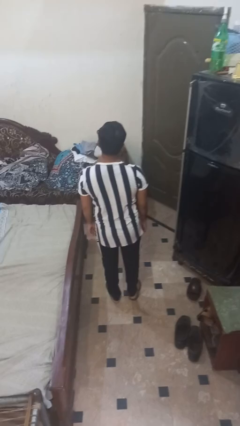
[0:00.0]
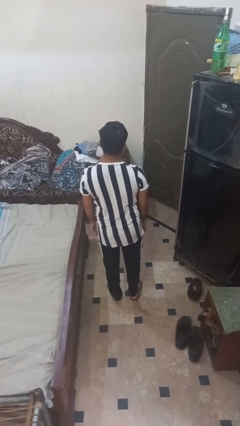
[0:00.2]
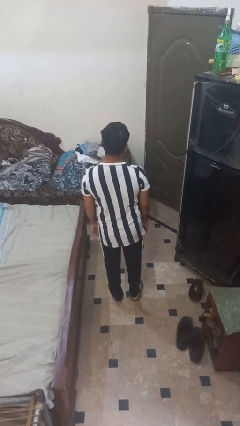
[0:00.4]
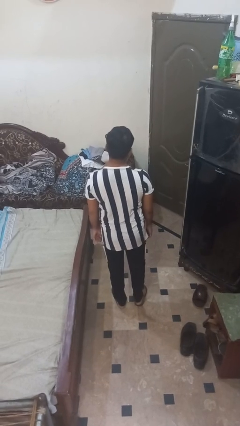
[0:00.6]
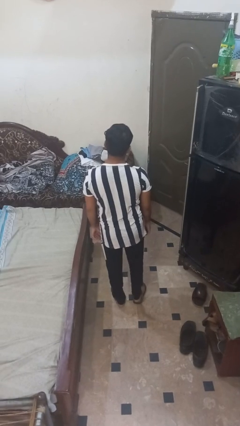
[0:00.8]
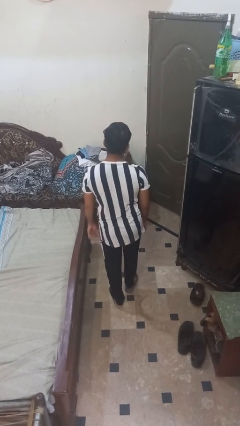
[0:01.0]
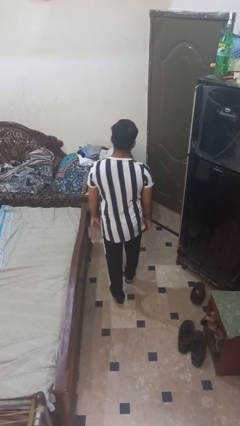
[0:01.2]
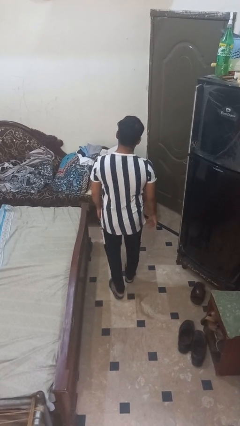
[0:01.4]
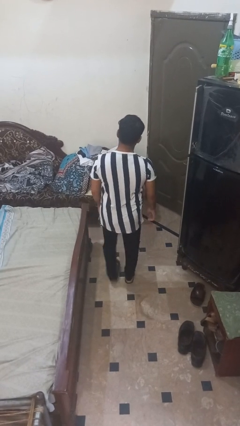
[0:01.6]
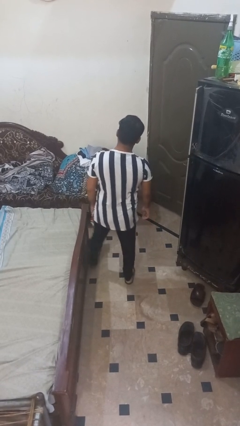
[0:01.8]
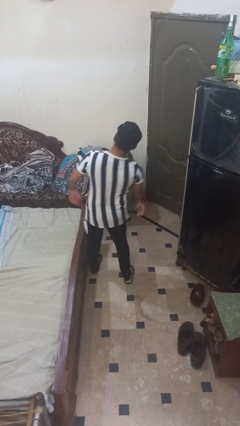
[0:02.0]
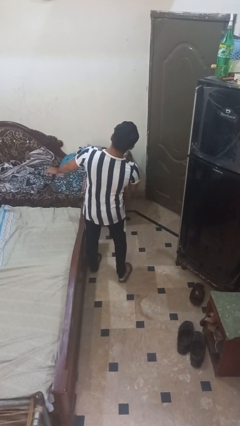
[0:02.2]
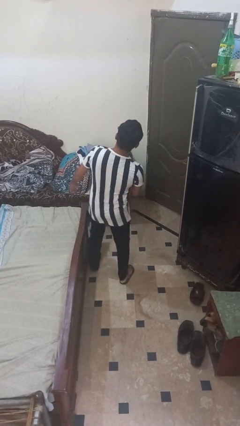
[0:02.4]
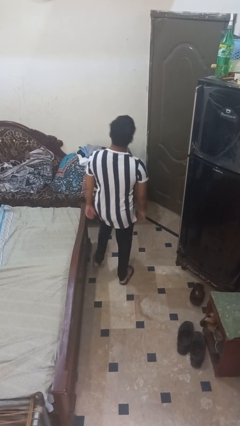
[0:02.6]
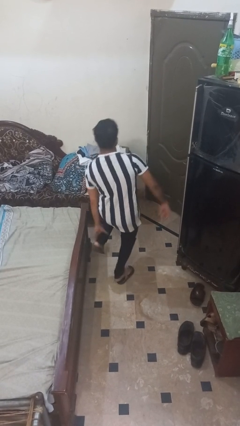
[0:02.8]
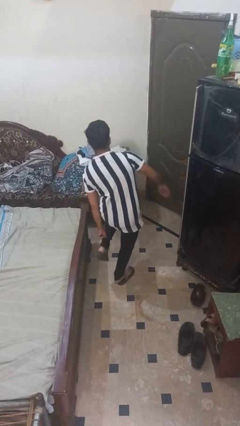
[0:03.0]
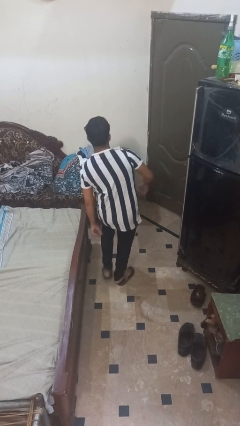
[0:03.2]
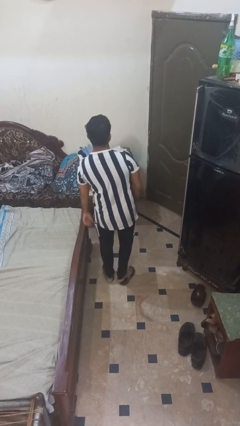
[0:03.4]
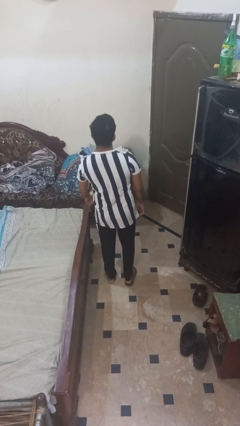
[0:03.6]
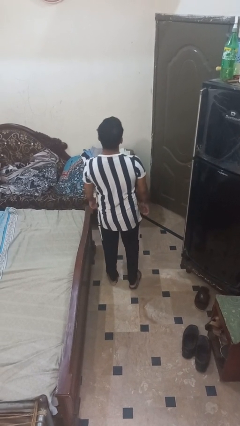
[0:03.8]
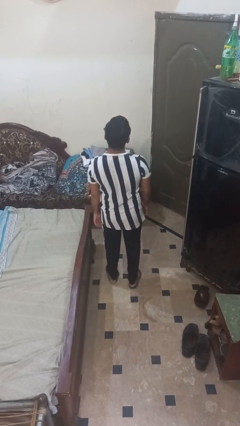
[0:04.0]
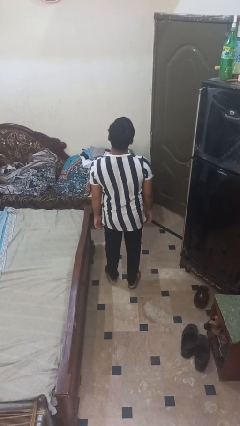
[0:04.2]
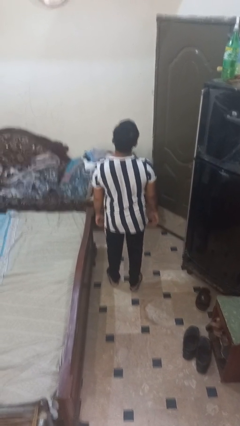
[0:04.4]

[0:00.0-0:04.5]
person stubs toe

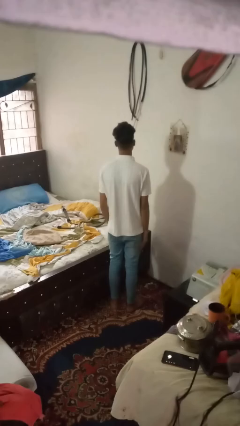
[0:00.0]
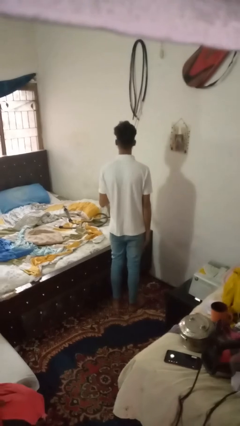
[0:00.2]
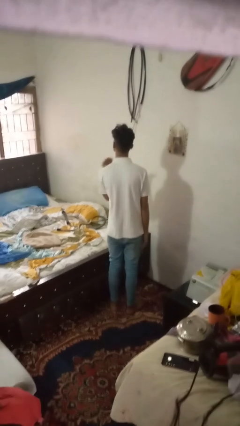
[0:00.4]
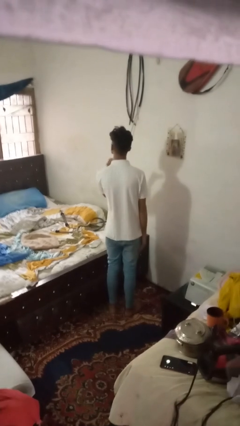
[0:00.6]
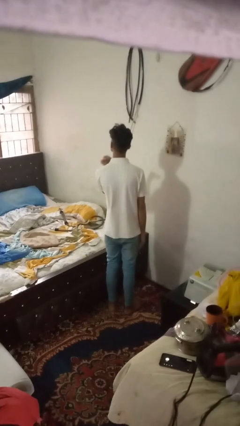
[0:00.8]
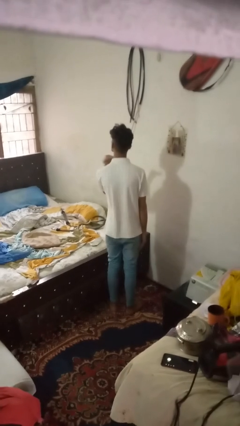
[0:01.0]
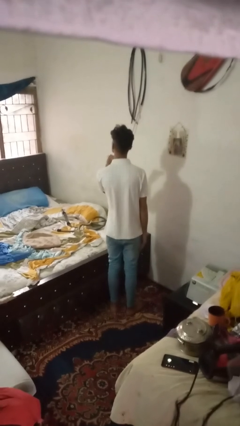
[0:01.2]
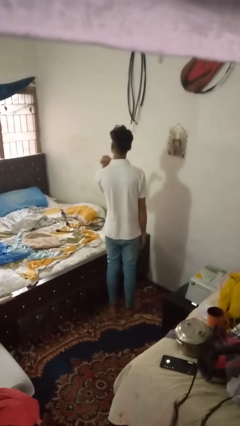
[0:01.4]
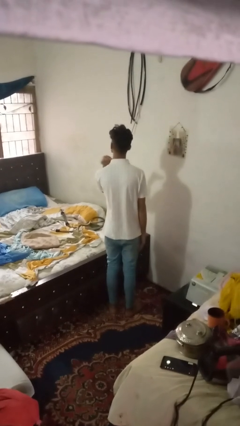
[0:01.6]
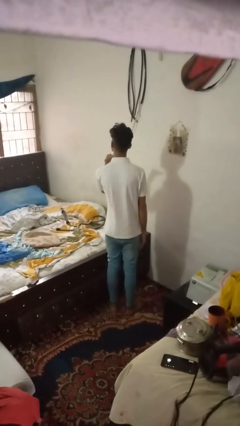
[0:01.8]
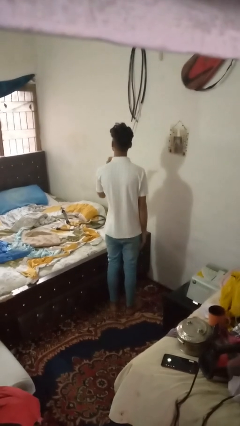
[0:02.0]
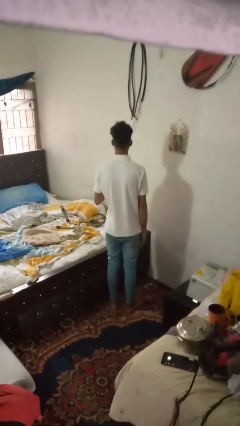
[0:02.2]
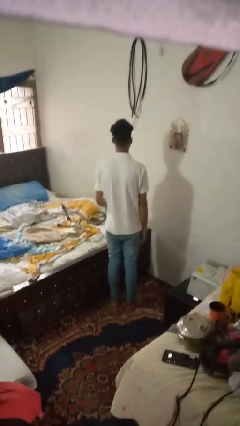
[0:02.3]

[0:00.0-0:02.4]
person gestures cut

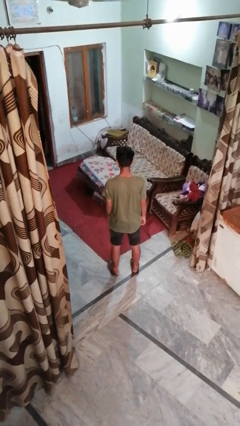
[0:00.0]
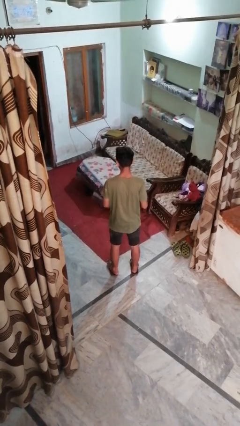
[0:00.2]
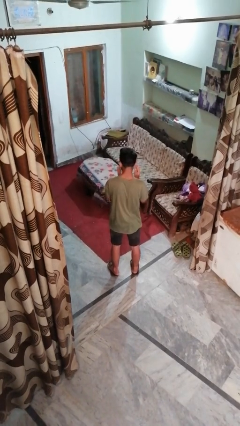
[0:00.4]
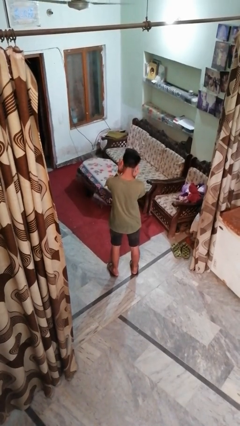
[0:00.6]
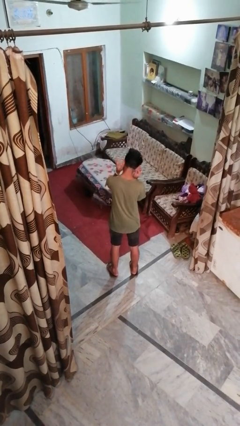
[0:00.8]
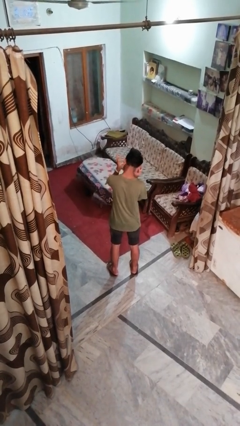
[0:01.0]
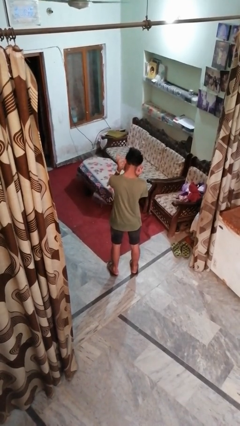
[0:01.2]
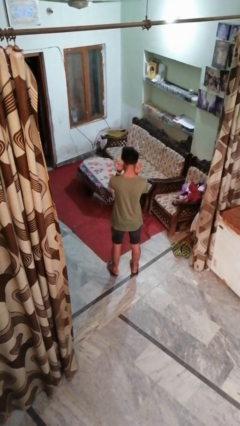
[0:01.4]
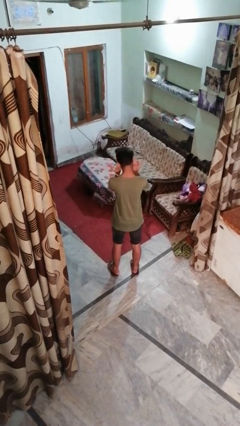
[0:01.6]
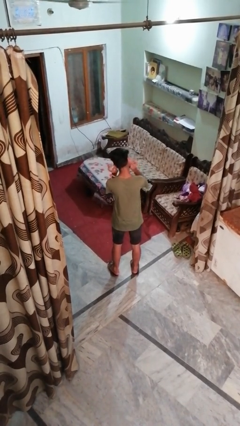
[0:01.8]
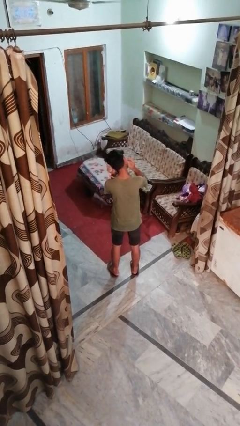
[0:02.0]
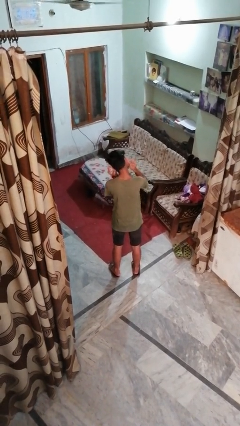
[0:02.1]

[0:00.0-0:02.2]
person touches earlobe

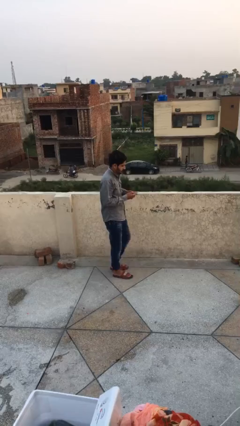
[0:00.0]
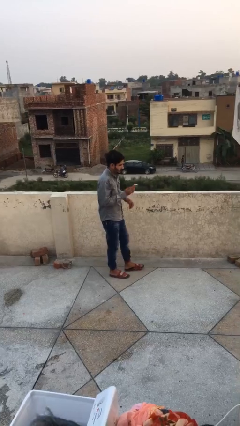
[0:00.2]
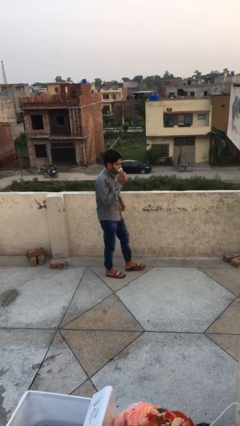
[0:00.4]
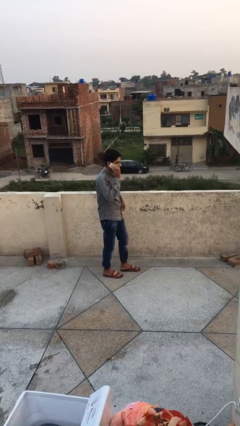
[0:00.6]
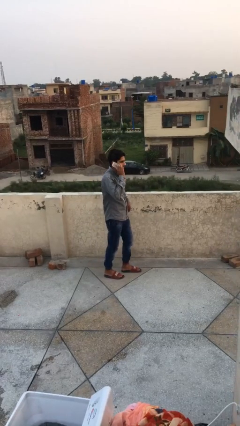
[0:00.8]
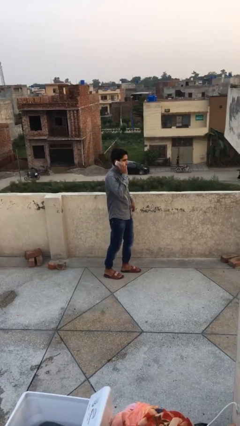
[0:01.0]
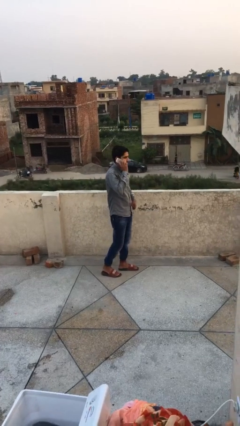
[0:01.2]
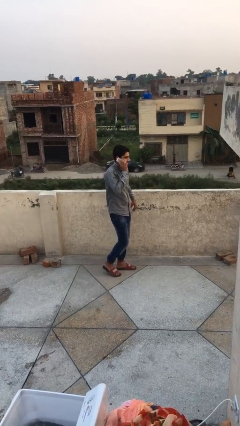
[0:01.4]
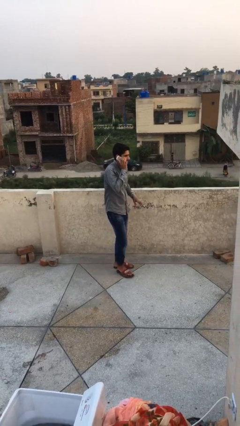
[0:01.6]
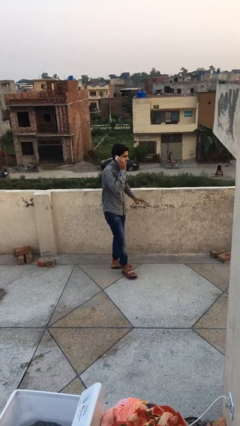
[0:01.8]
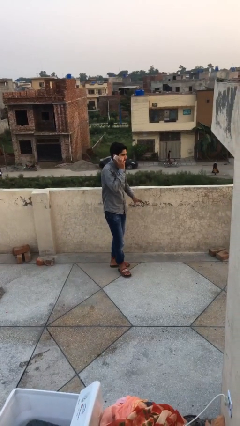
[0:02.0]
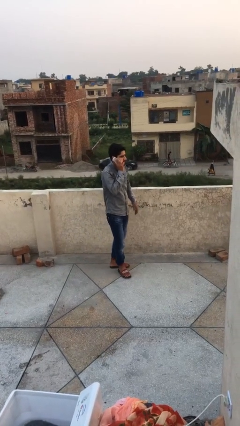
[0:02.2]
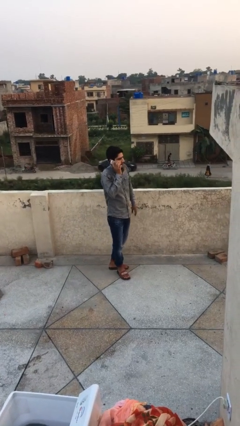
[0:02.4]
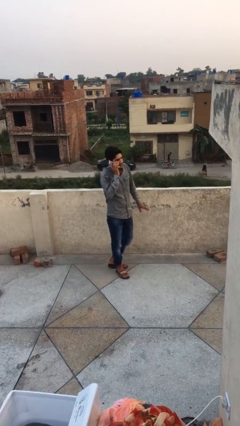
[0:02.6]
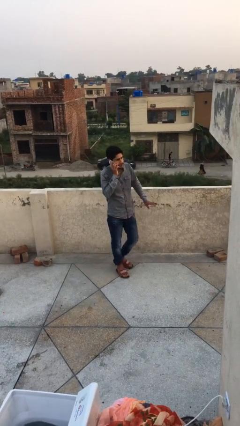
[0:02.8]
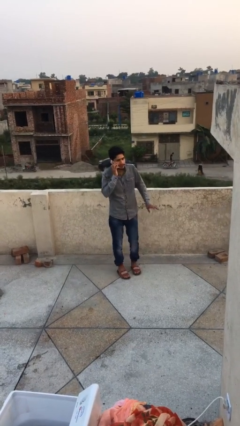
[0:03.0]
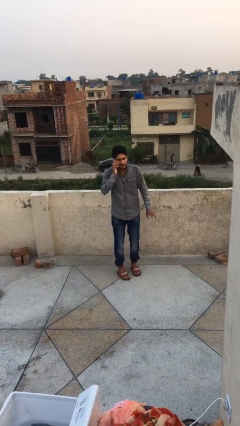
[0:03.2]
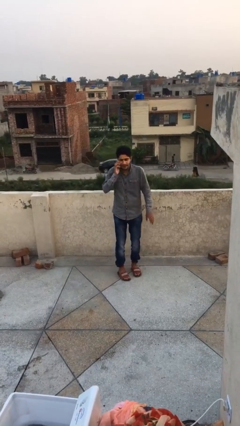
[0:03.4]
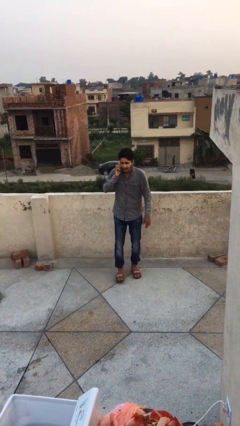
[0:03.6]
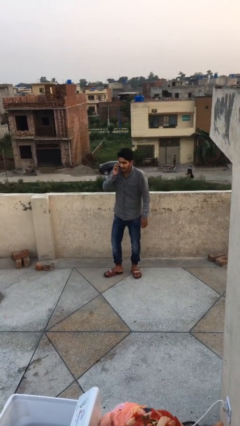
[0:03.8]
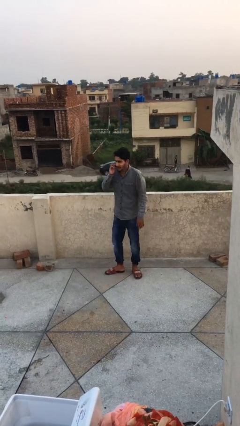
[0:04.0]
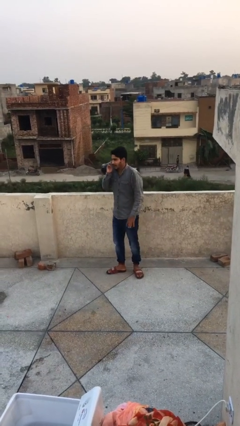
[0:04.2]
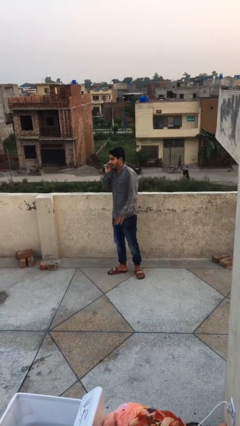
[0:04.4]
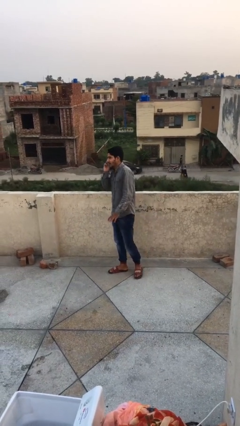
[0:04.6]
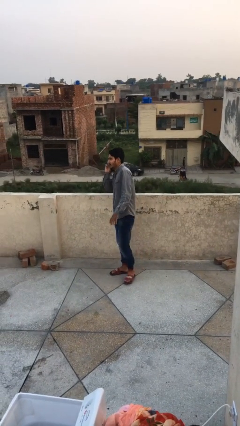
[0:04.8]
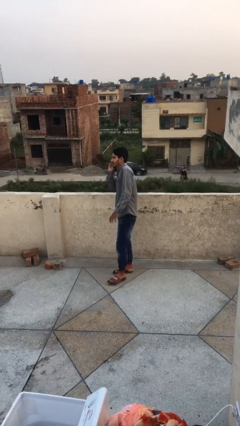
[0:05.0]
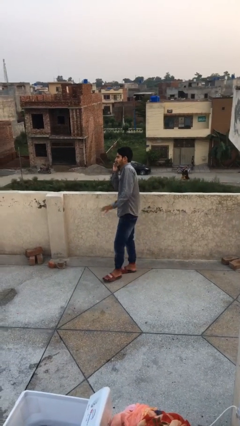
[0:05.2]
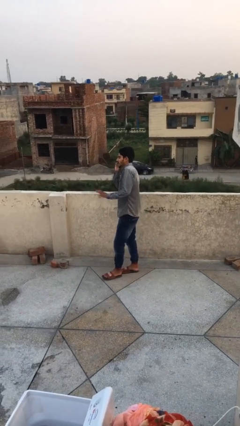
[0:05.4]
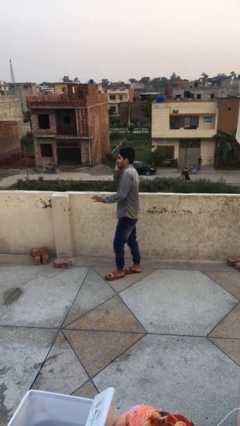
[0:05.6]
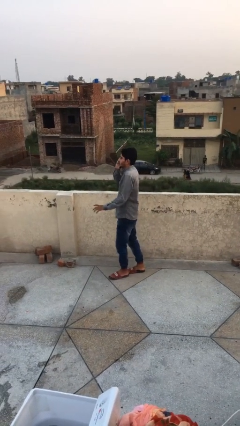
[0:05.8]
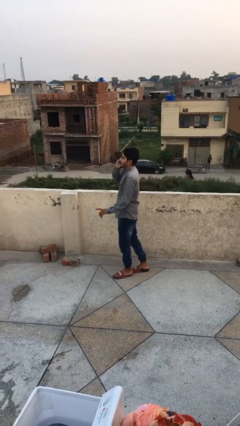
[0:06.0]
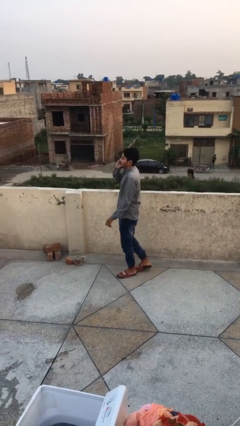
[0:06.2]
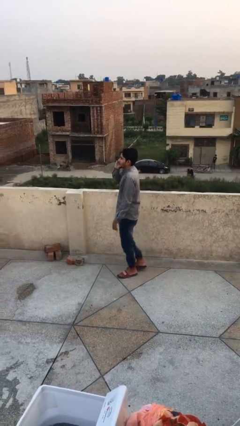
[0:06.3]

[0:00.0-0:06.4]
person talks on phone

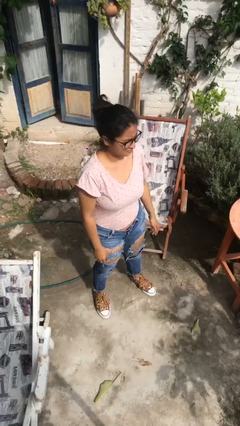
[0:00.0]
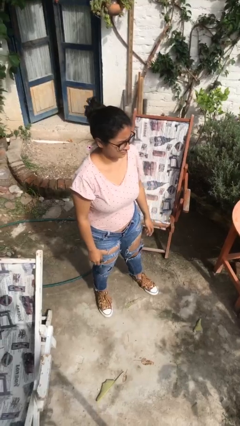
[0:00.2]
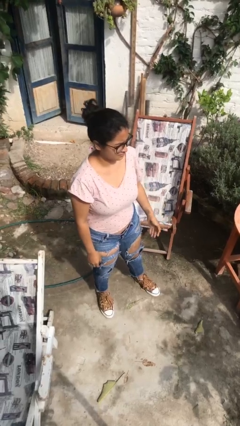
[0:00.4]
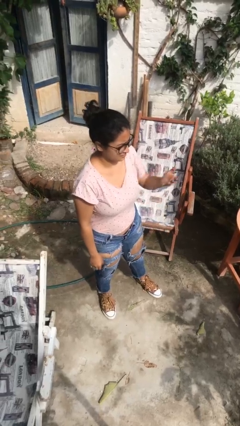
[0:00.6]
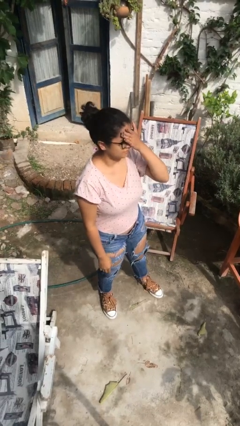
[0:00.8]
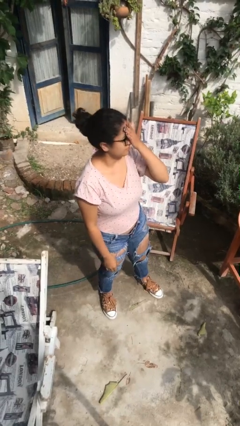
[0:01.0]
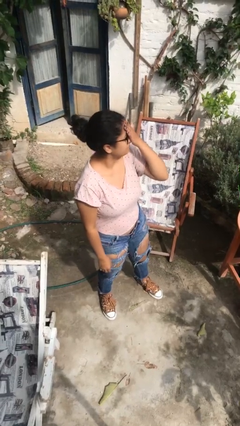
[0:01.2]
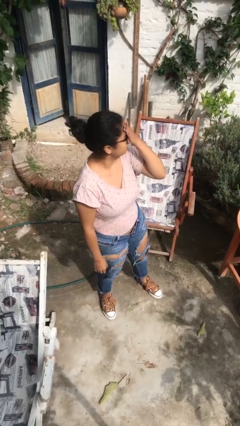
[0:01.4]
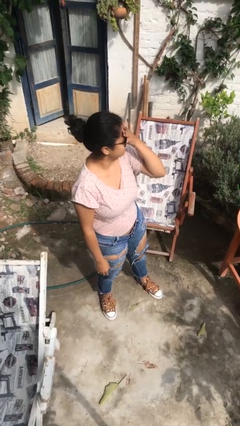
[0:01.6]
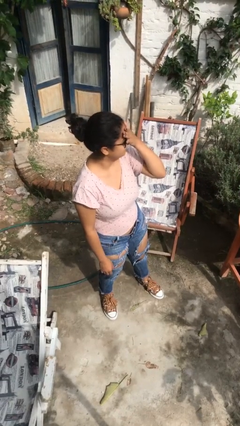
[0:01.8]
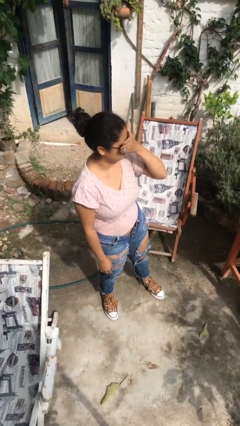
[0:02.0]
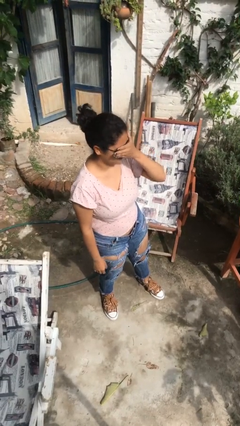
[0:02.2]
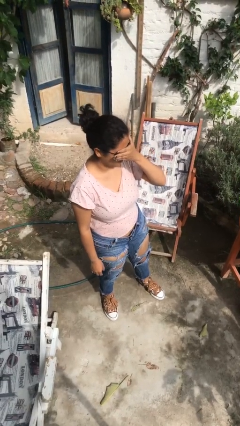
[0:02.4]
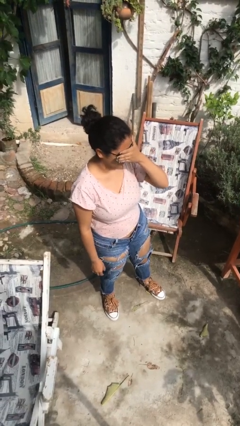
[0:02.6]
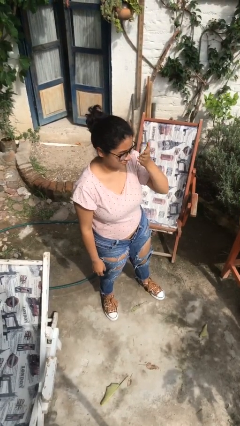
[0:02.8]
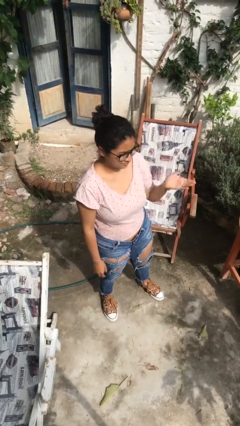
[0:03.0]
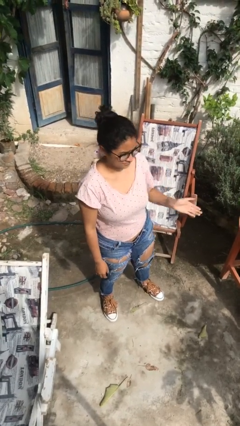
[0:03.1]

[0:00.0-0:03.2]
person covers face with hands
